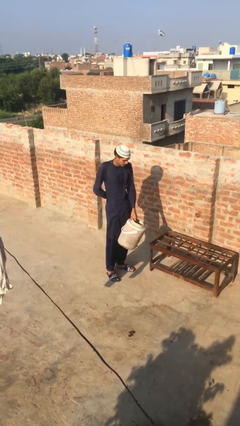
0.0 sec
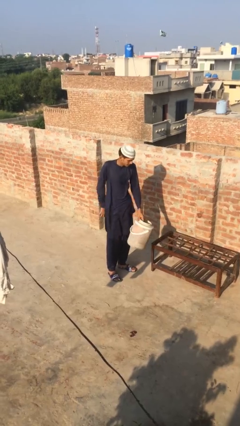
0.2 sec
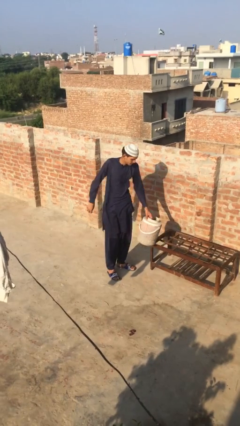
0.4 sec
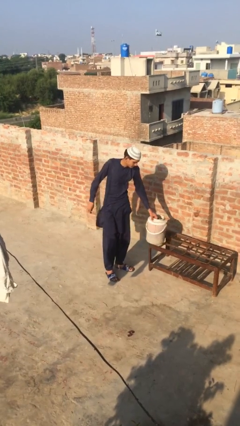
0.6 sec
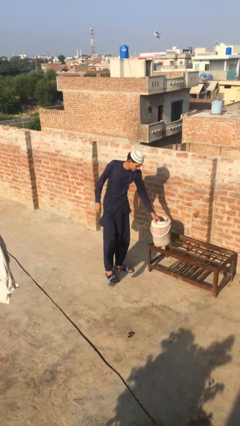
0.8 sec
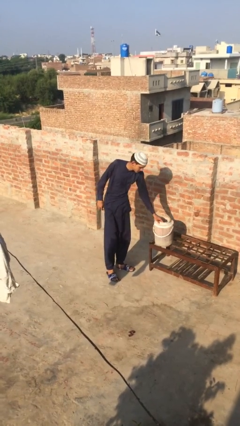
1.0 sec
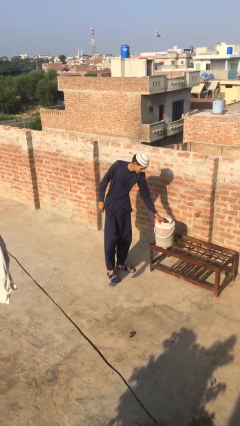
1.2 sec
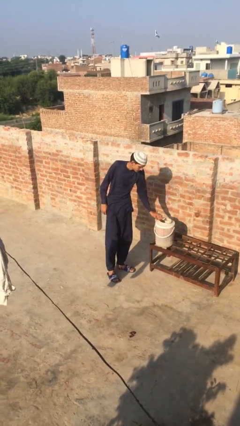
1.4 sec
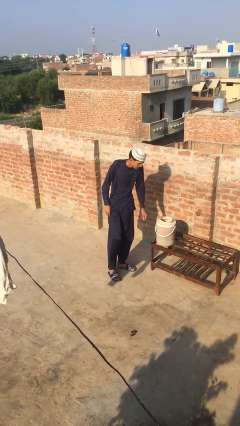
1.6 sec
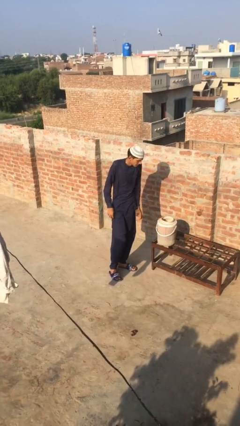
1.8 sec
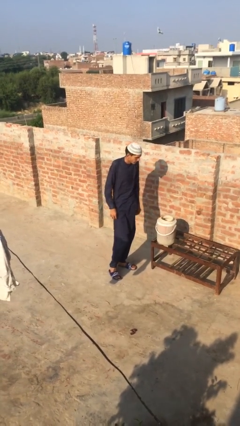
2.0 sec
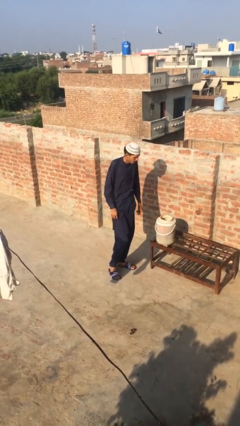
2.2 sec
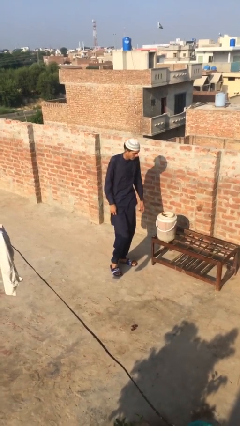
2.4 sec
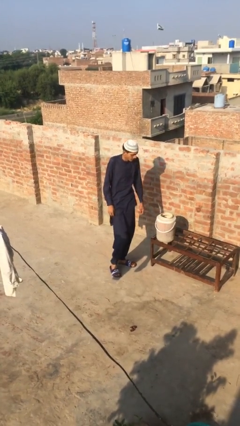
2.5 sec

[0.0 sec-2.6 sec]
person puts down object on table

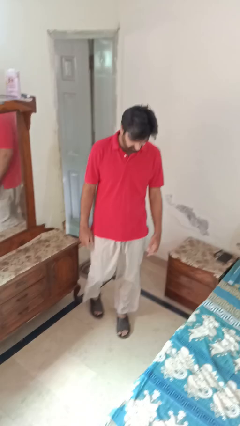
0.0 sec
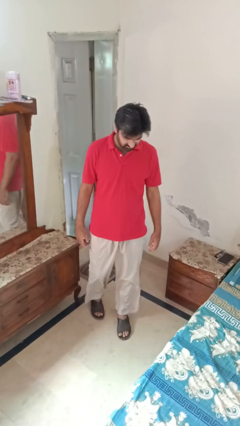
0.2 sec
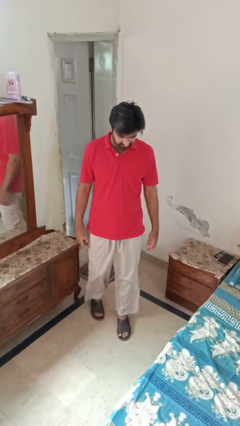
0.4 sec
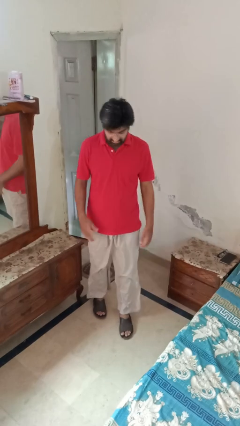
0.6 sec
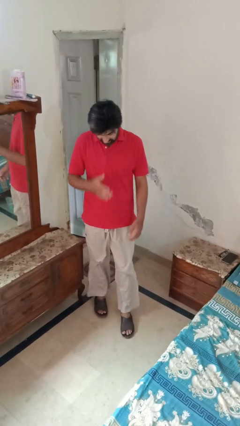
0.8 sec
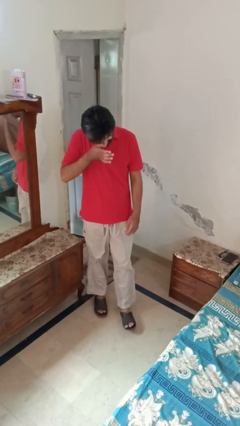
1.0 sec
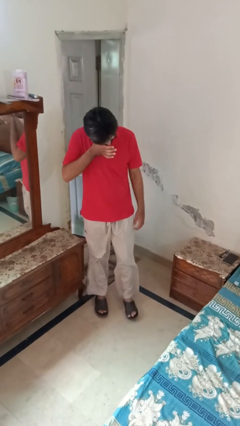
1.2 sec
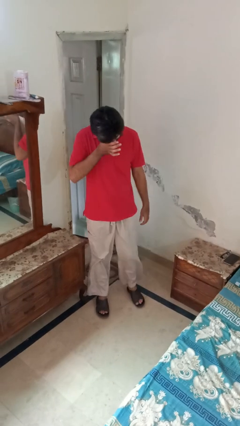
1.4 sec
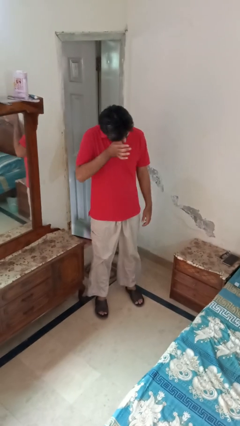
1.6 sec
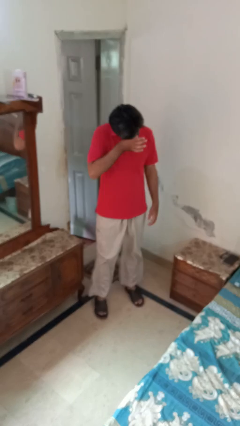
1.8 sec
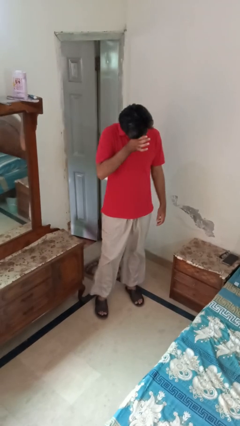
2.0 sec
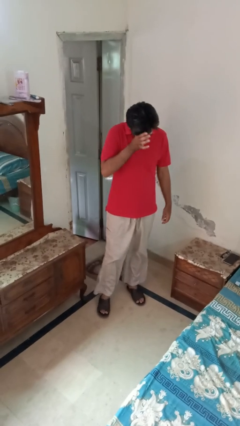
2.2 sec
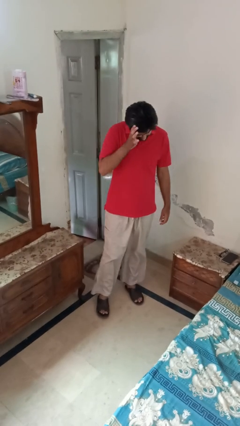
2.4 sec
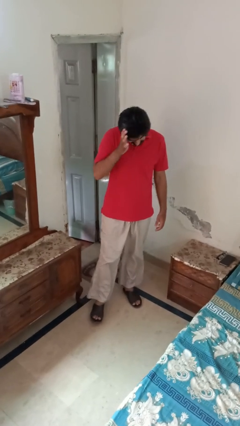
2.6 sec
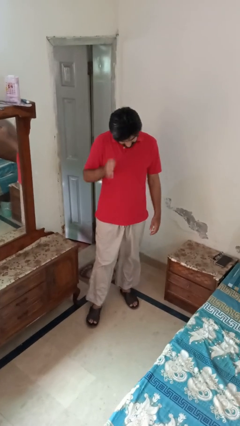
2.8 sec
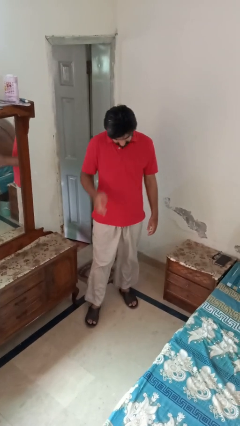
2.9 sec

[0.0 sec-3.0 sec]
person rubs eyes

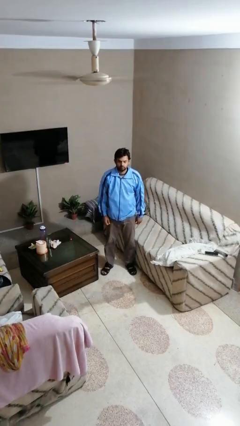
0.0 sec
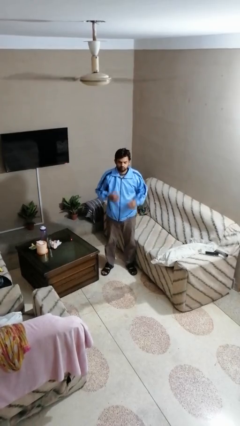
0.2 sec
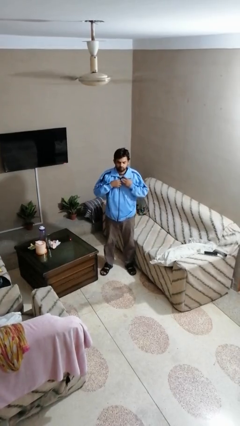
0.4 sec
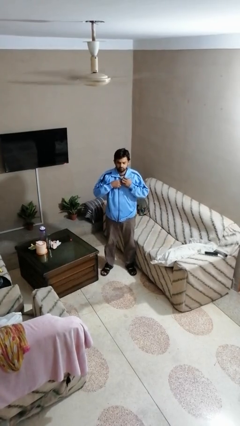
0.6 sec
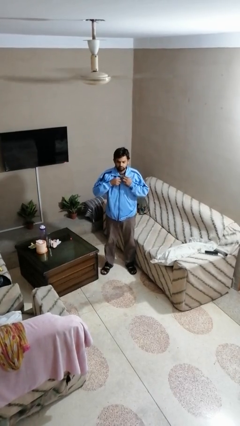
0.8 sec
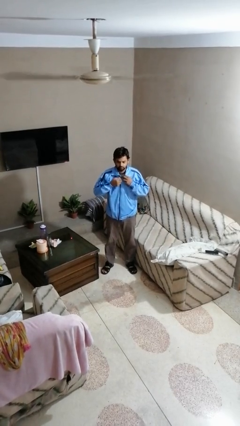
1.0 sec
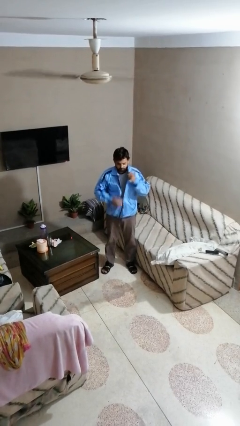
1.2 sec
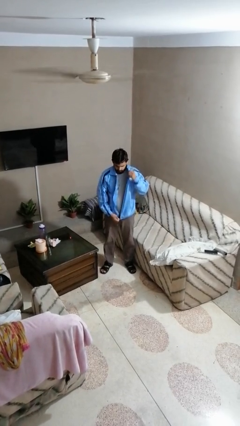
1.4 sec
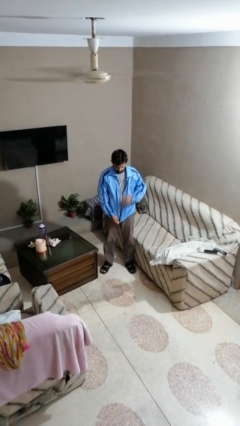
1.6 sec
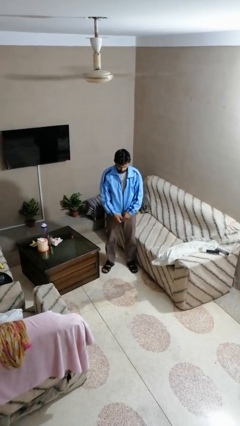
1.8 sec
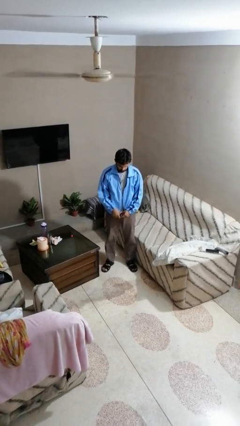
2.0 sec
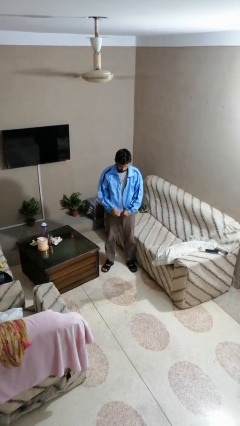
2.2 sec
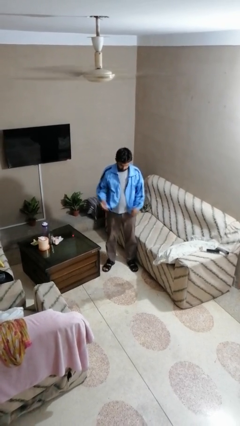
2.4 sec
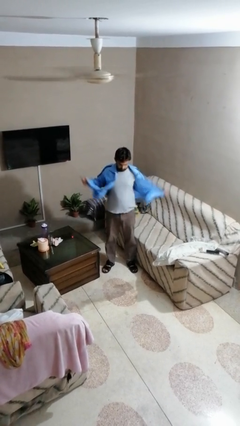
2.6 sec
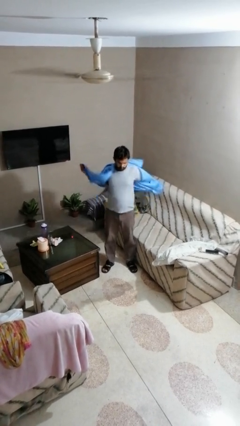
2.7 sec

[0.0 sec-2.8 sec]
person unzips jacket

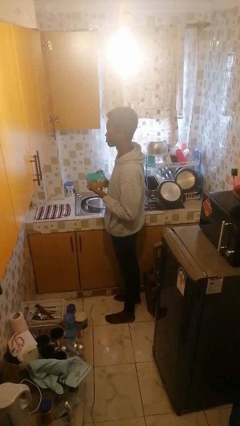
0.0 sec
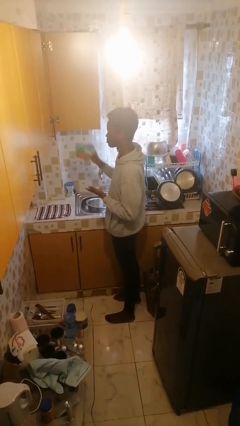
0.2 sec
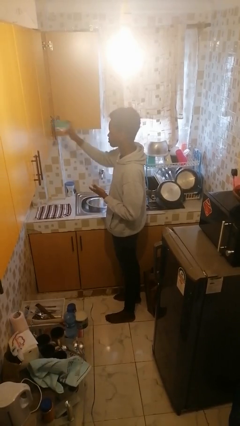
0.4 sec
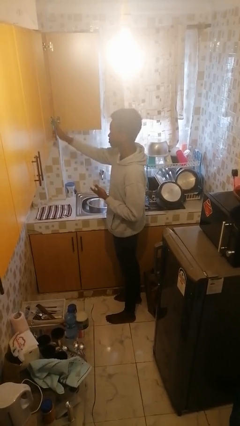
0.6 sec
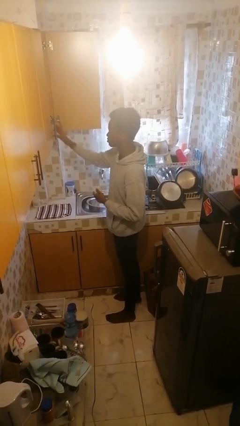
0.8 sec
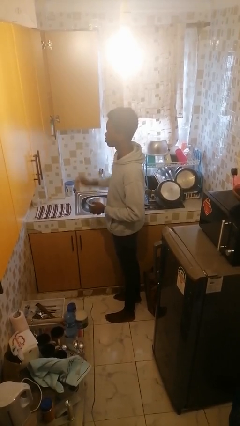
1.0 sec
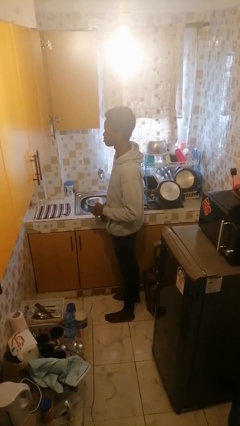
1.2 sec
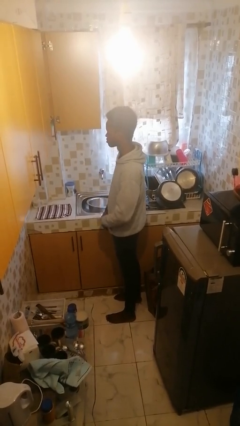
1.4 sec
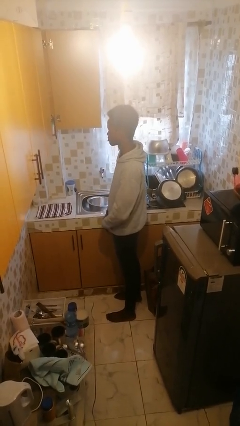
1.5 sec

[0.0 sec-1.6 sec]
person puts down object into cabinet

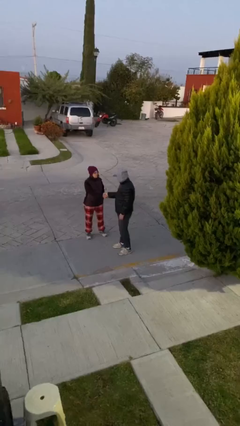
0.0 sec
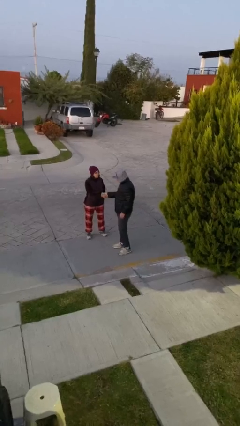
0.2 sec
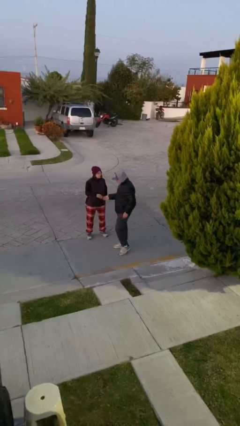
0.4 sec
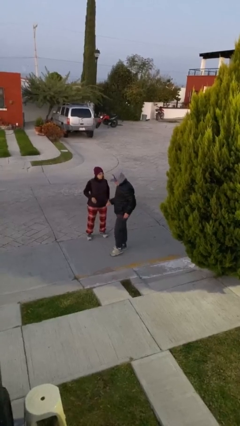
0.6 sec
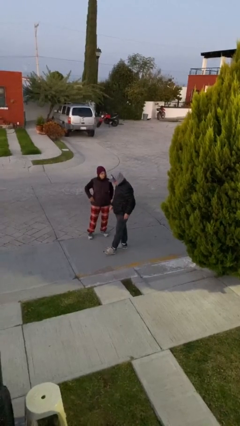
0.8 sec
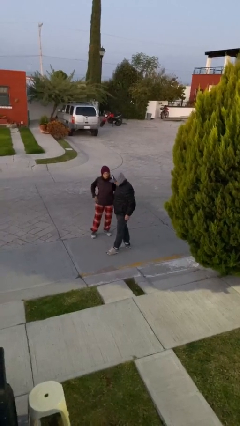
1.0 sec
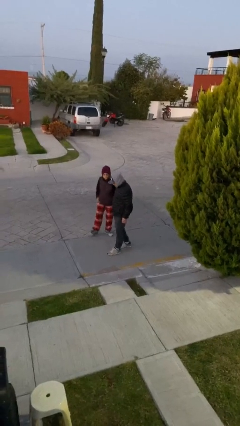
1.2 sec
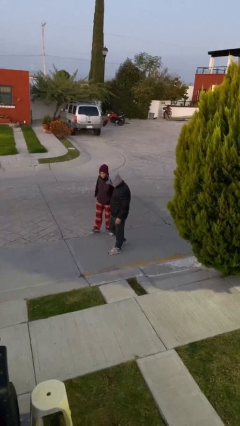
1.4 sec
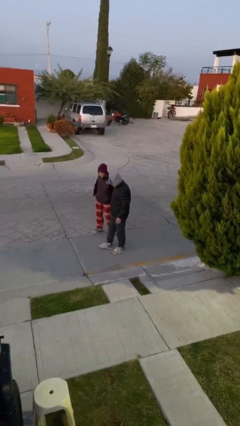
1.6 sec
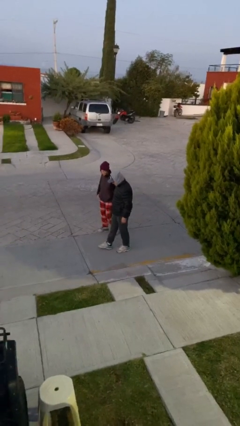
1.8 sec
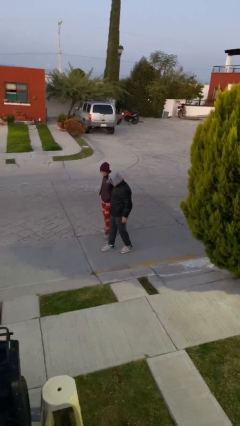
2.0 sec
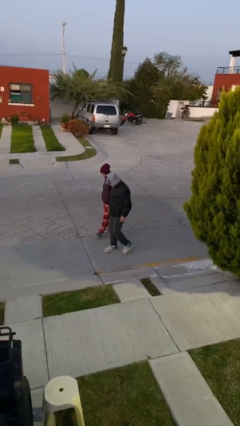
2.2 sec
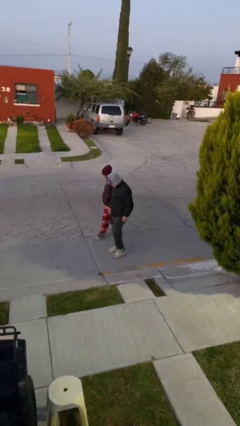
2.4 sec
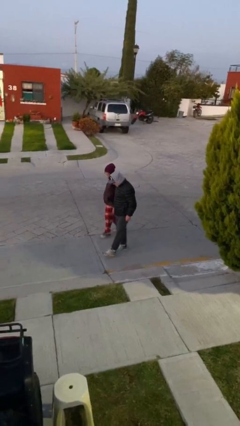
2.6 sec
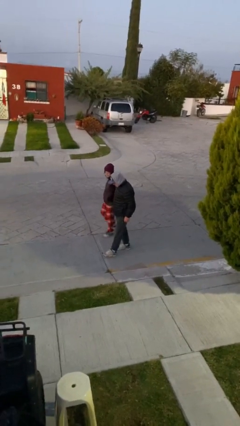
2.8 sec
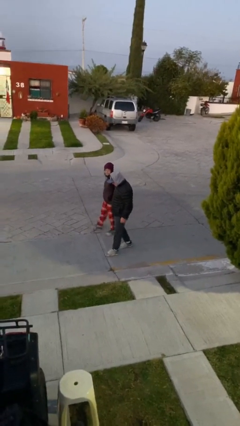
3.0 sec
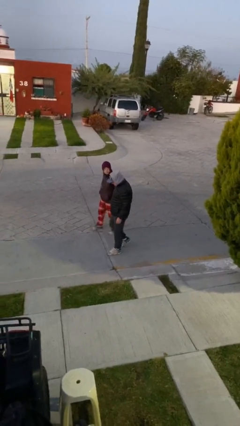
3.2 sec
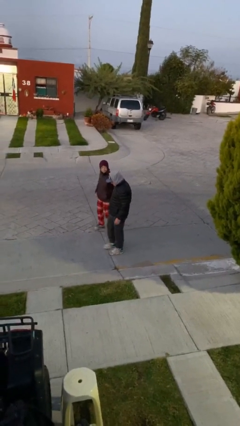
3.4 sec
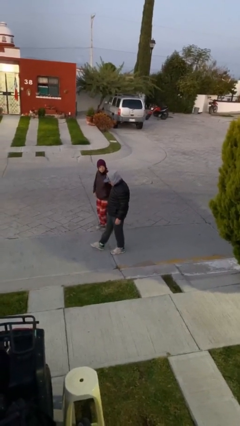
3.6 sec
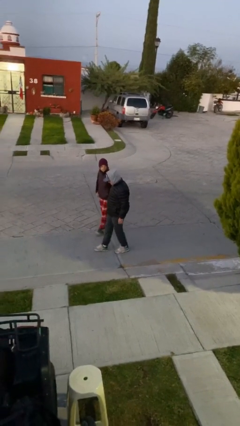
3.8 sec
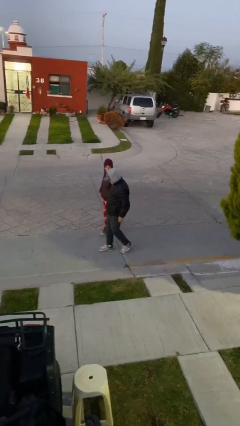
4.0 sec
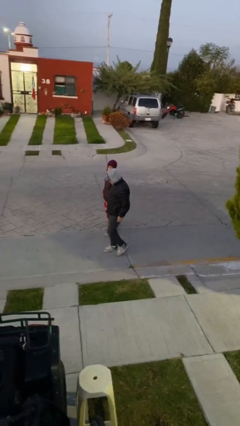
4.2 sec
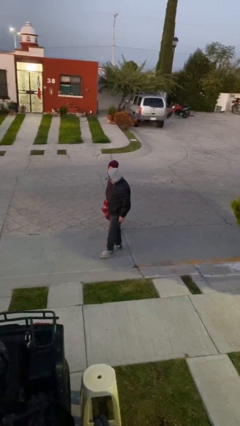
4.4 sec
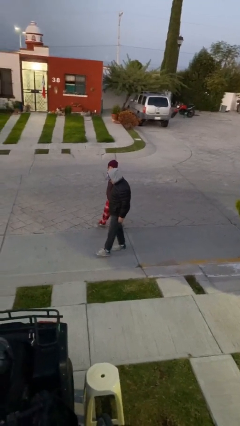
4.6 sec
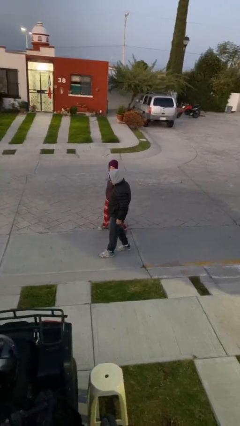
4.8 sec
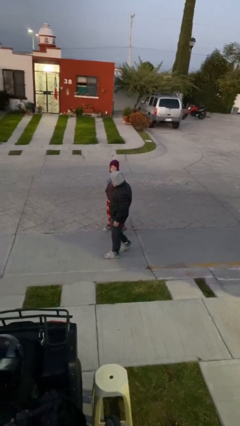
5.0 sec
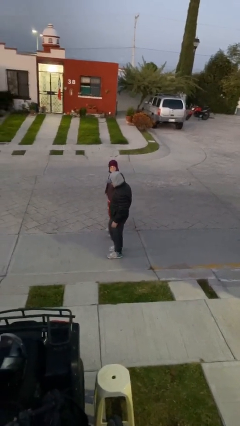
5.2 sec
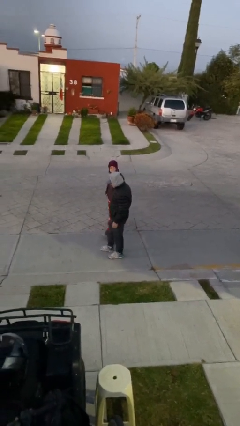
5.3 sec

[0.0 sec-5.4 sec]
person talks to person

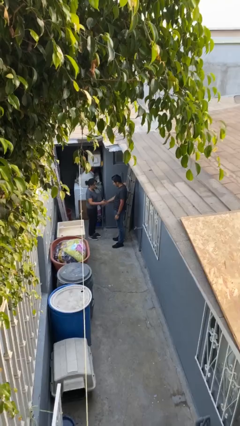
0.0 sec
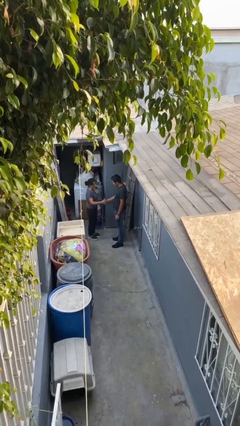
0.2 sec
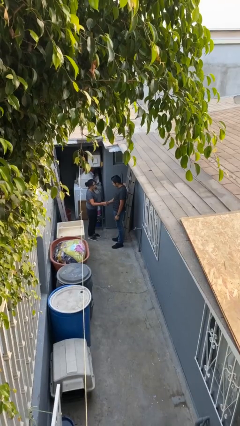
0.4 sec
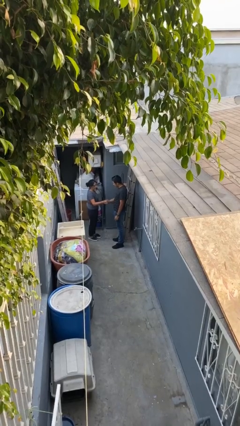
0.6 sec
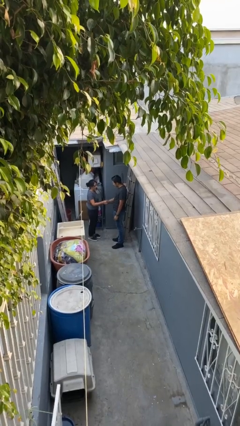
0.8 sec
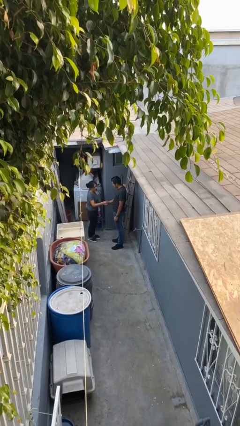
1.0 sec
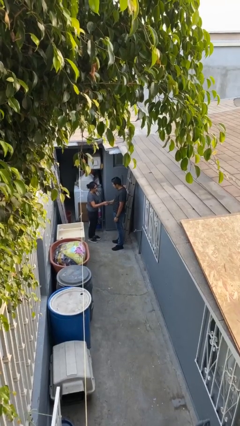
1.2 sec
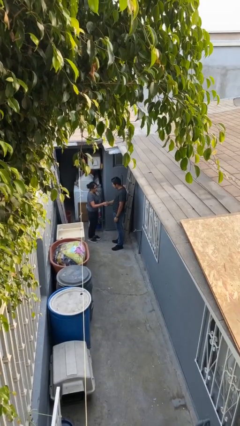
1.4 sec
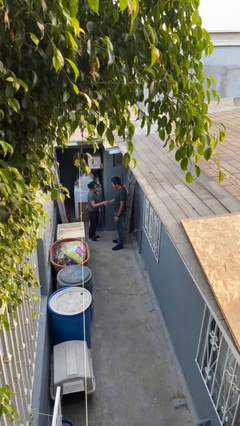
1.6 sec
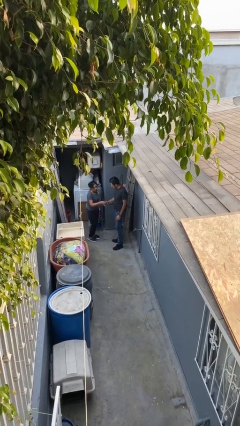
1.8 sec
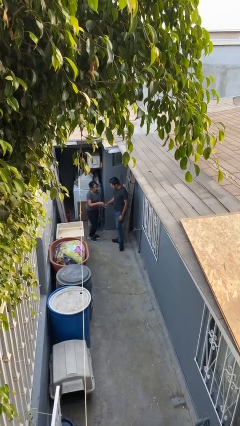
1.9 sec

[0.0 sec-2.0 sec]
person shakes hand

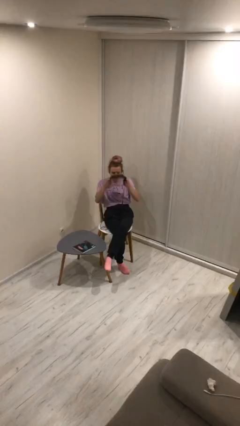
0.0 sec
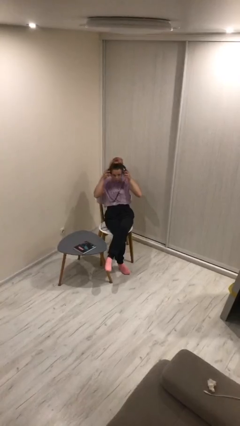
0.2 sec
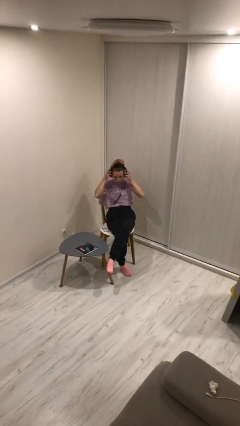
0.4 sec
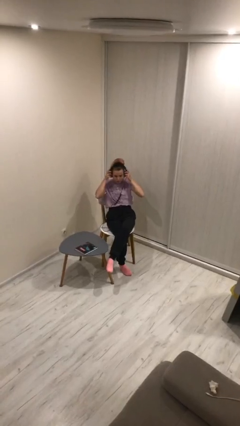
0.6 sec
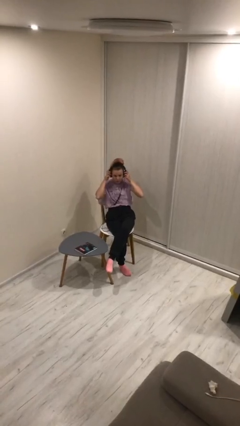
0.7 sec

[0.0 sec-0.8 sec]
person puts on headphones
